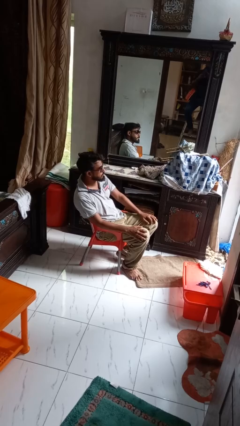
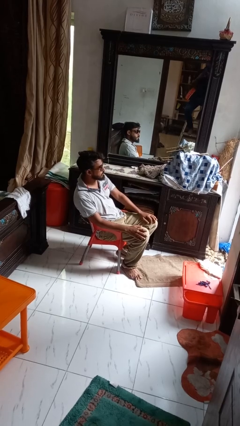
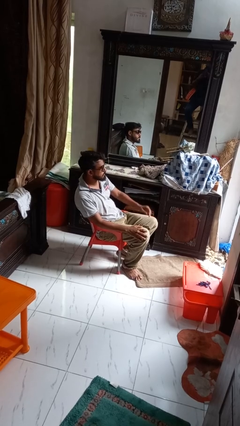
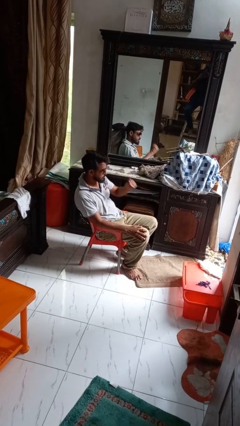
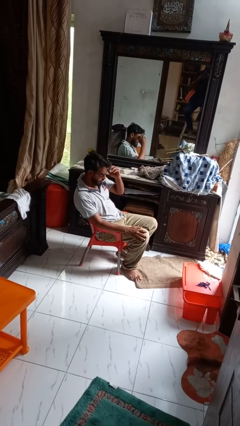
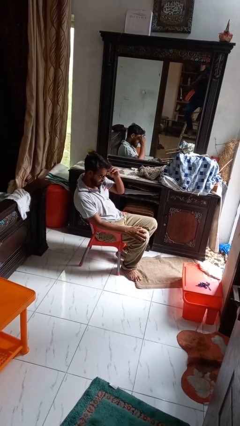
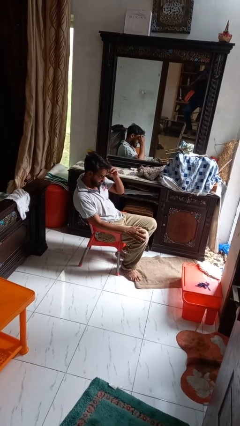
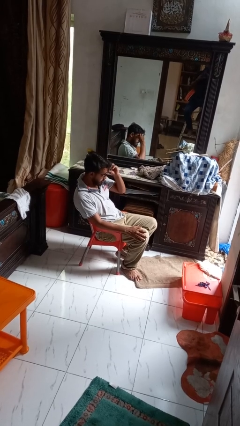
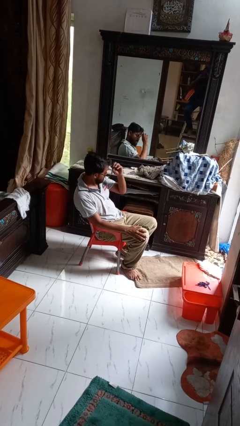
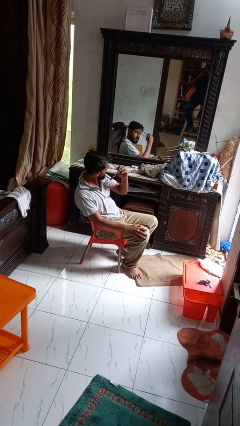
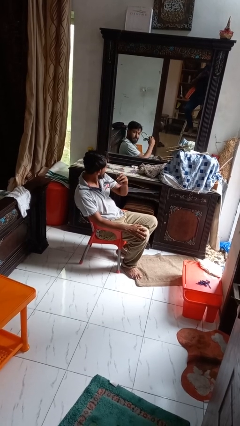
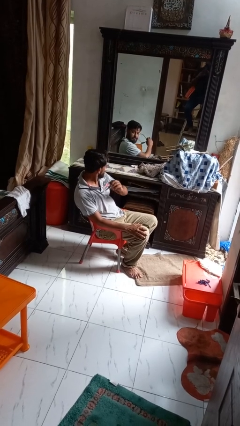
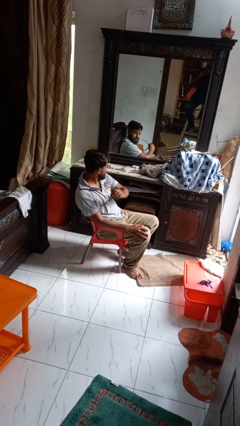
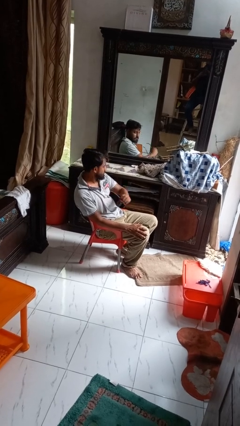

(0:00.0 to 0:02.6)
person takes off sunglasses

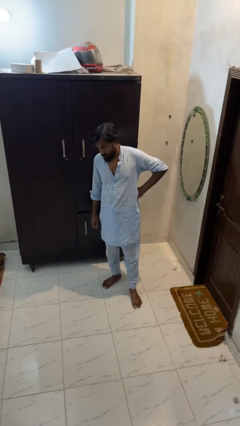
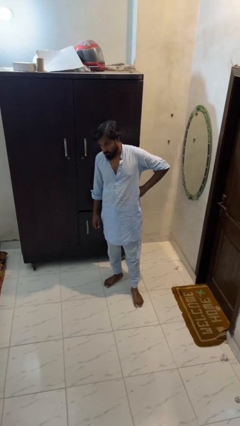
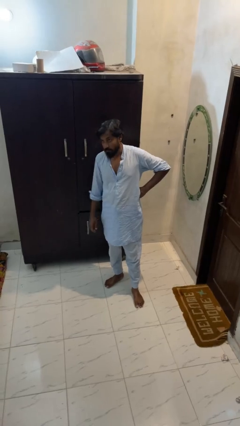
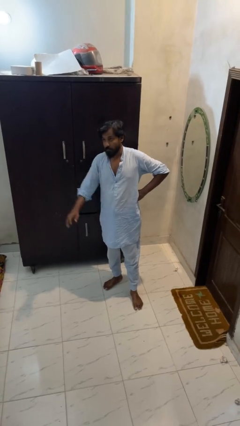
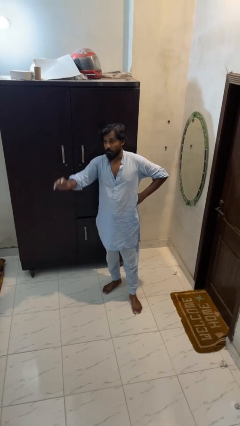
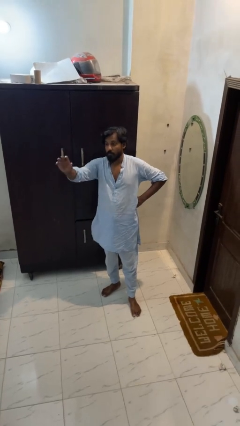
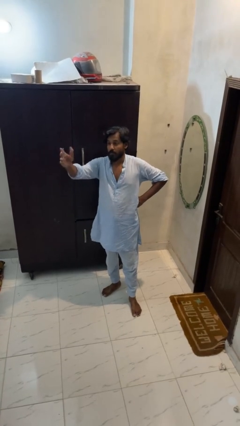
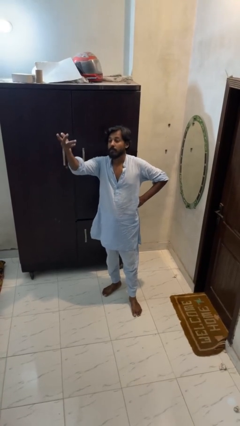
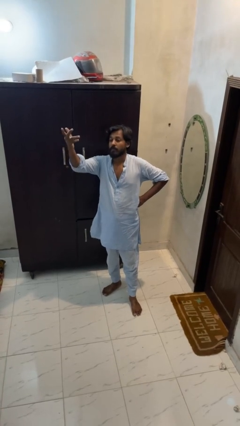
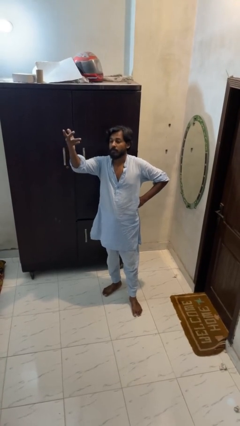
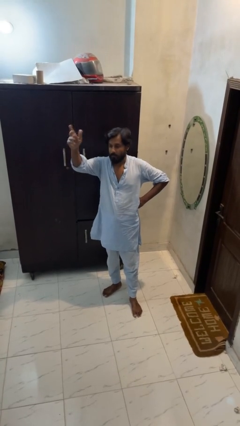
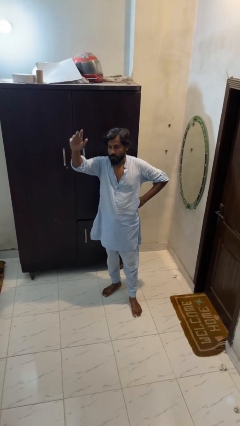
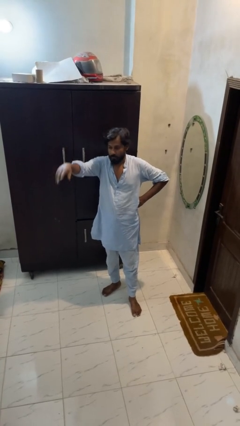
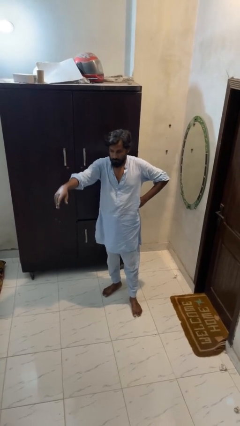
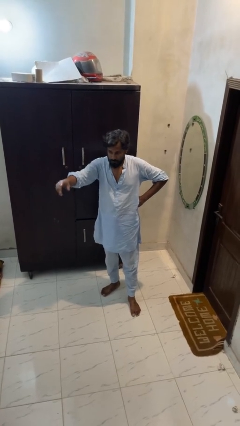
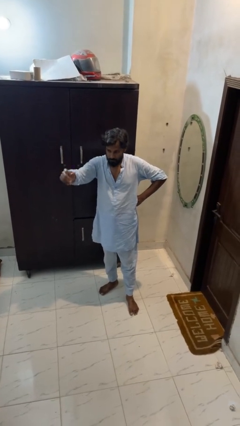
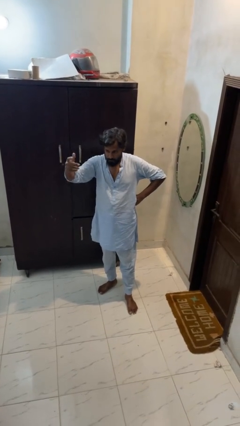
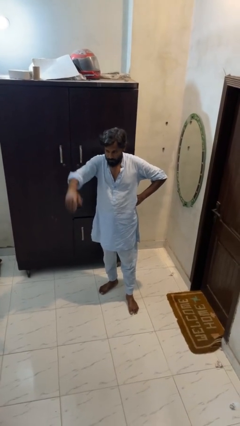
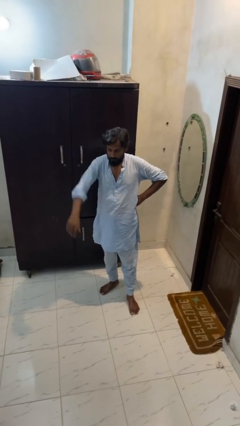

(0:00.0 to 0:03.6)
person gestures raise hand

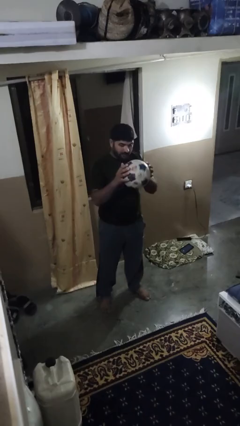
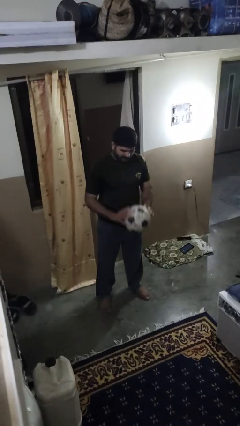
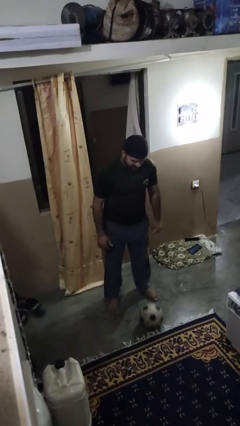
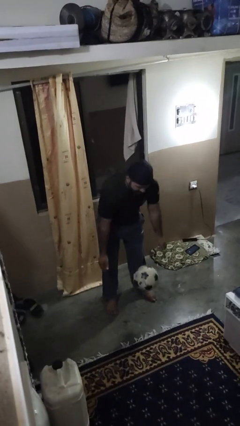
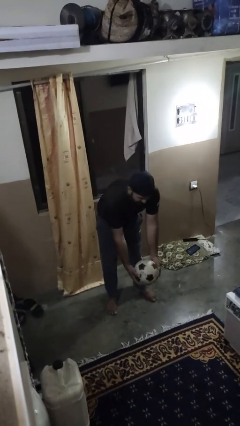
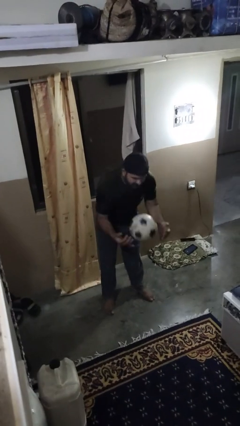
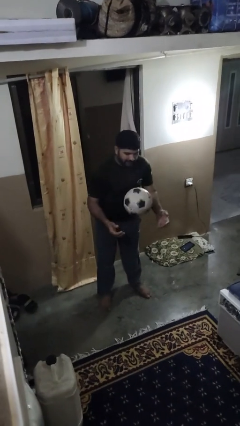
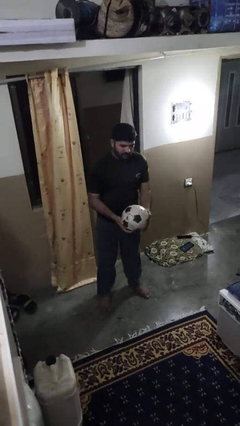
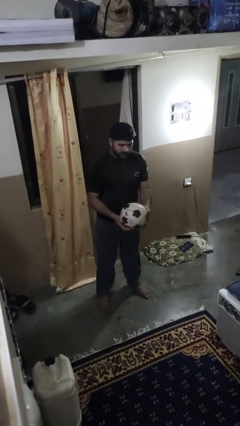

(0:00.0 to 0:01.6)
person bounces ball on floor

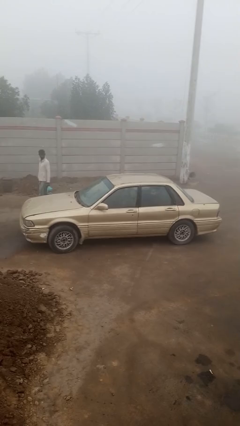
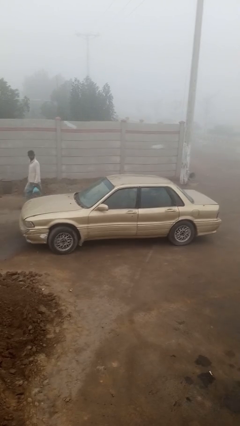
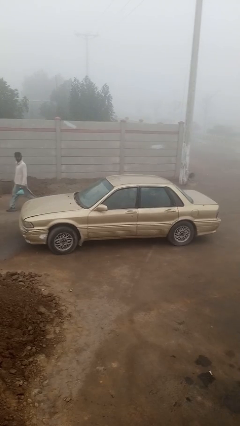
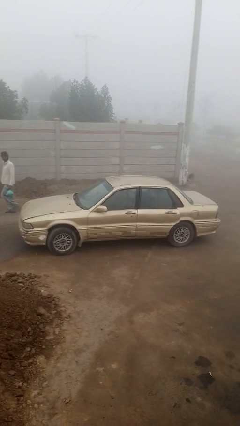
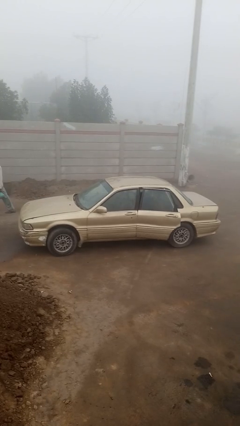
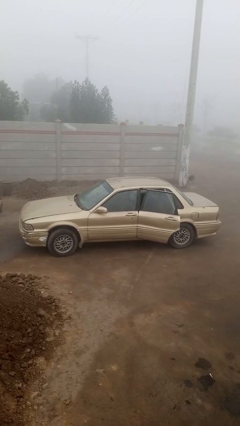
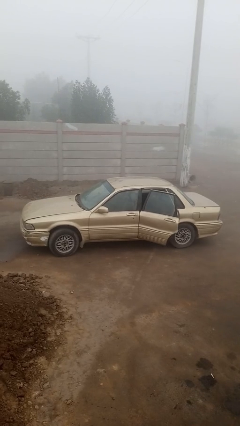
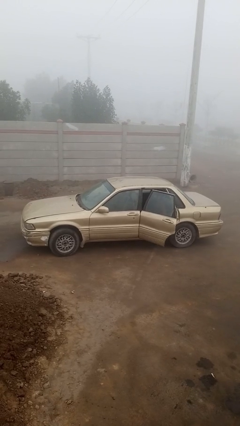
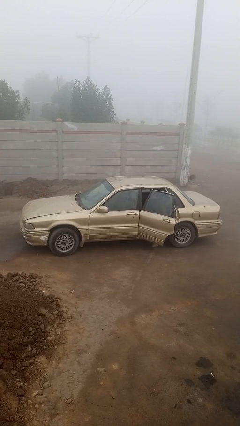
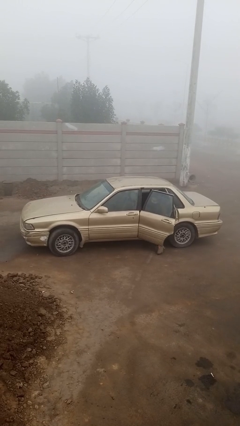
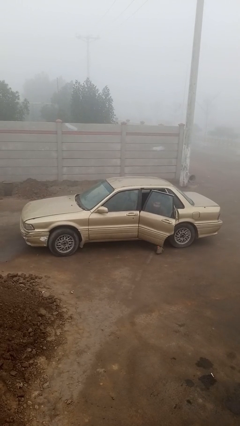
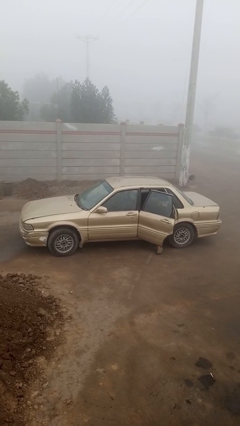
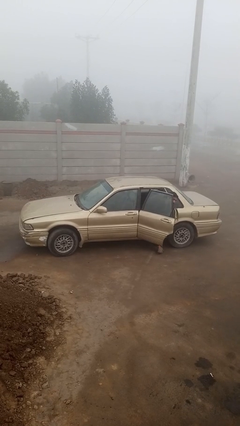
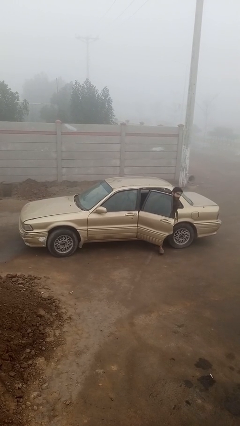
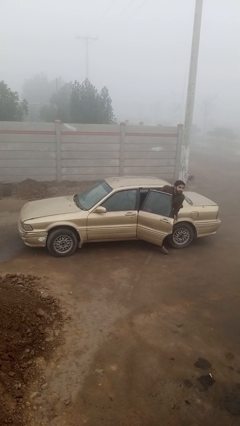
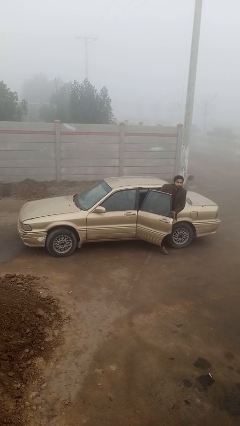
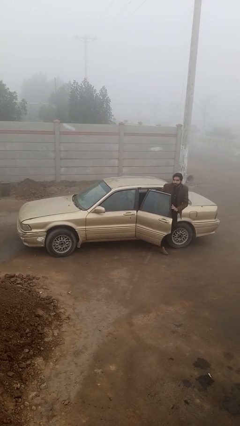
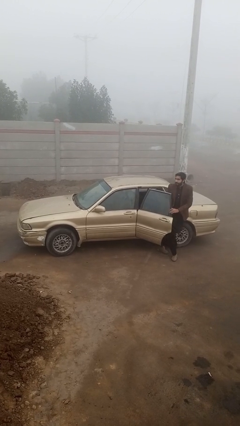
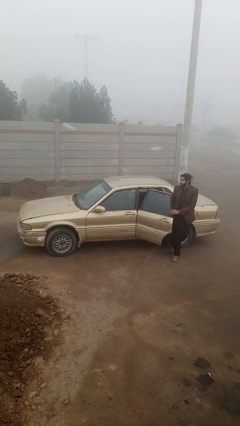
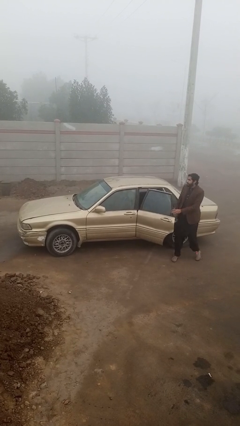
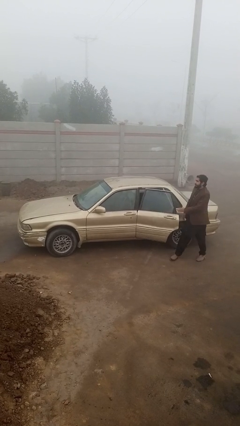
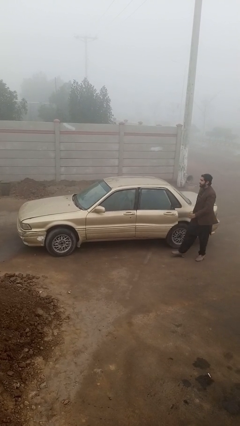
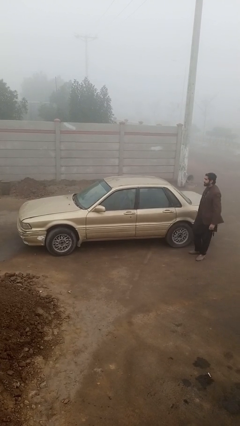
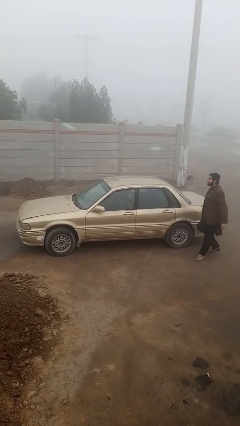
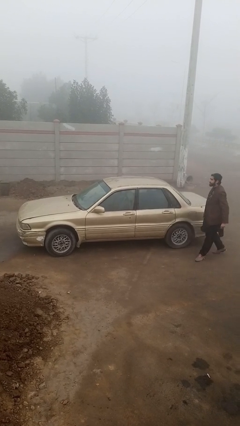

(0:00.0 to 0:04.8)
car drops off person

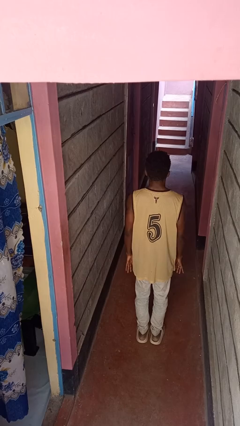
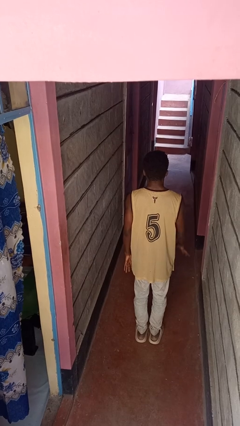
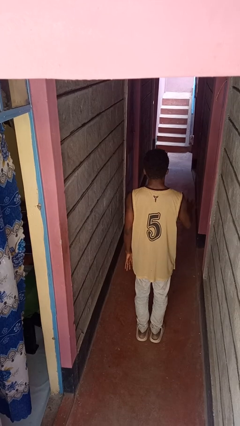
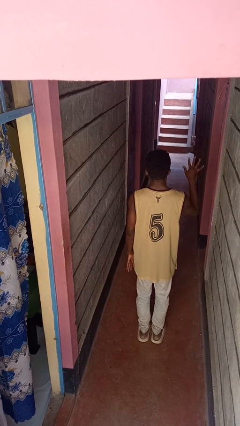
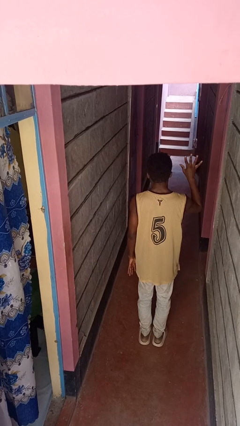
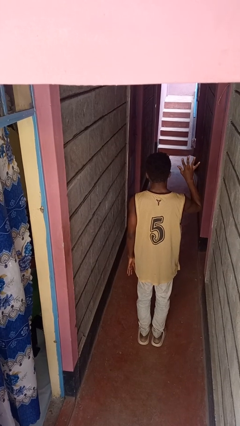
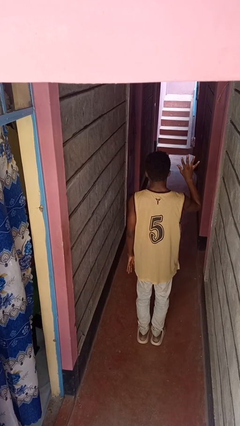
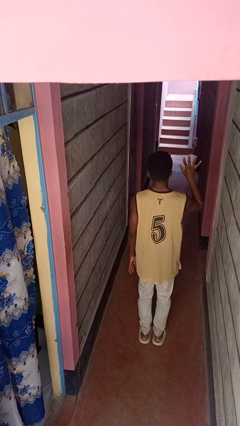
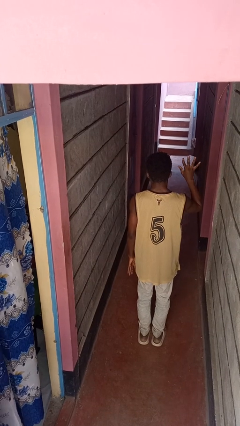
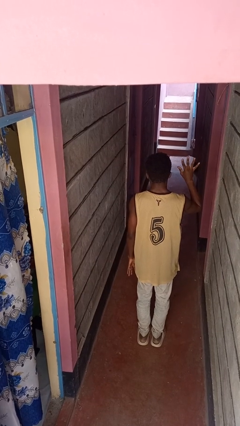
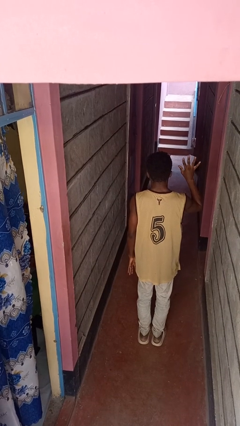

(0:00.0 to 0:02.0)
person gestures number five

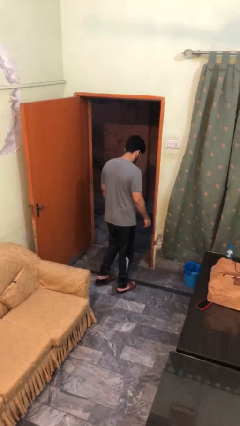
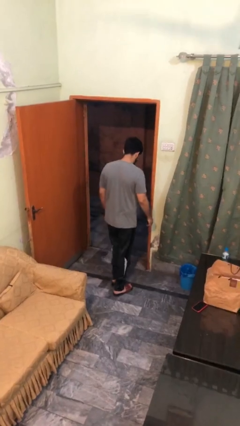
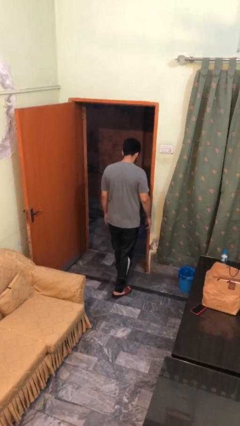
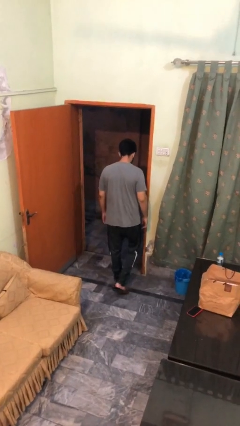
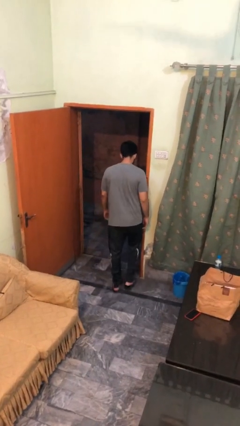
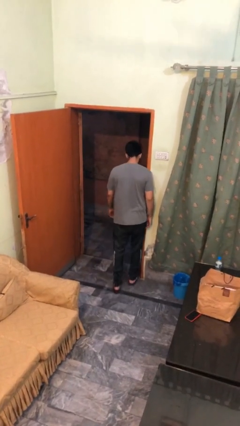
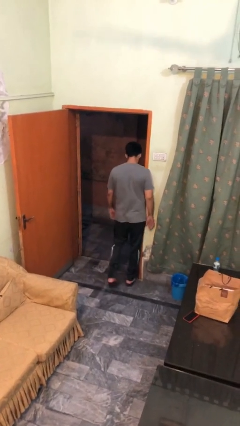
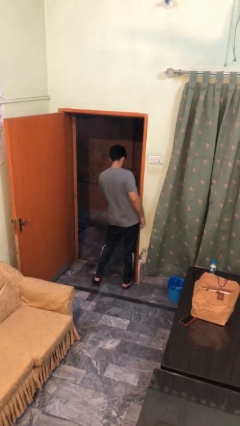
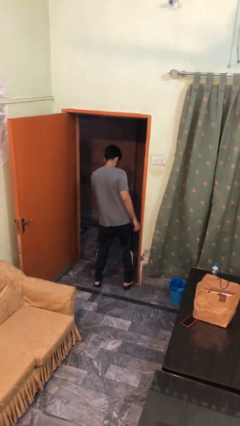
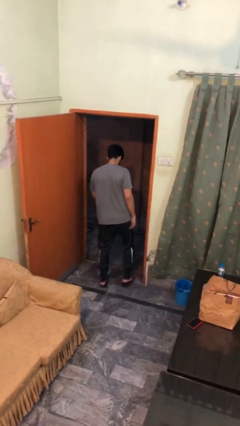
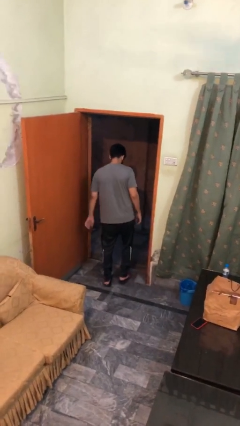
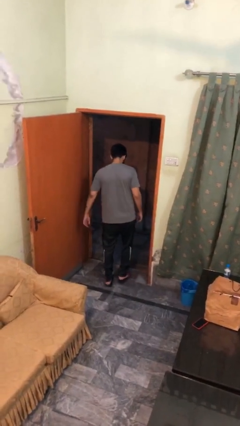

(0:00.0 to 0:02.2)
person bumps into wall

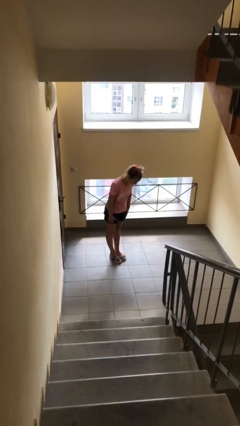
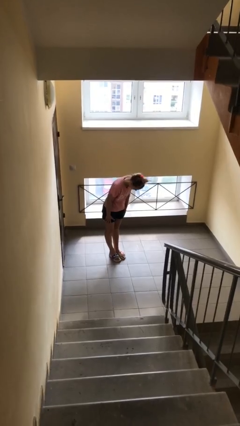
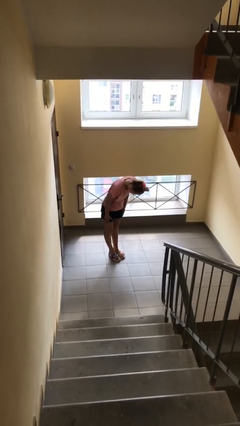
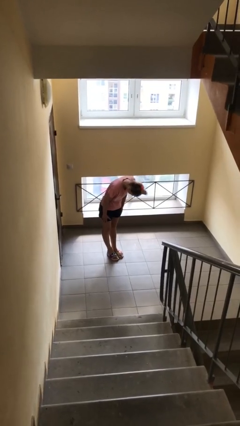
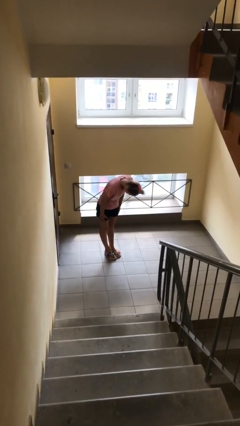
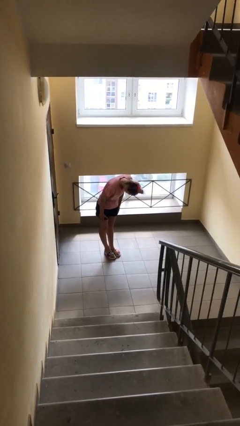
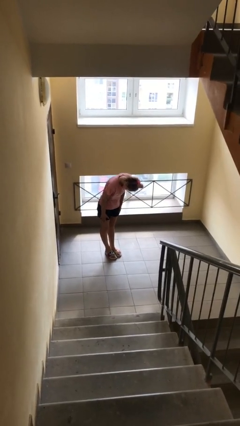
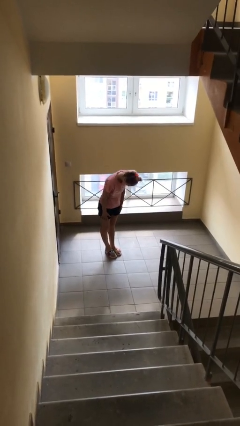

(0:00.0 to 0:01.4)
person bows
